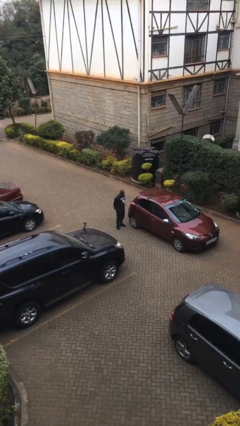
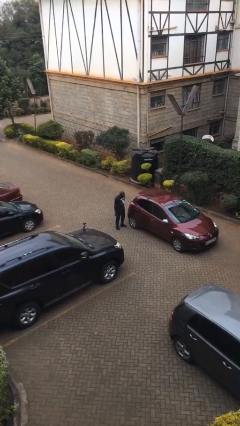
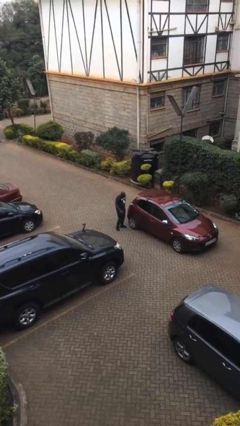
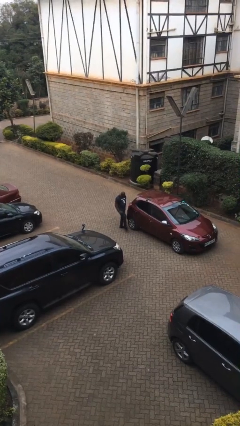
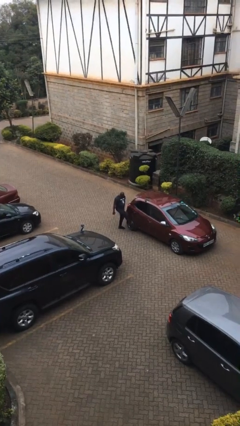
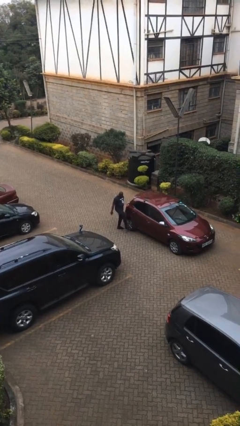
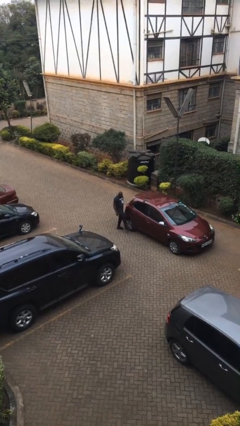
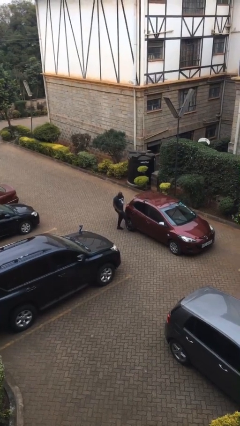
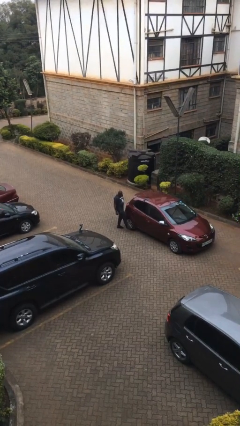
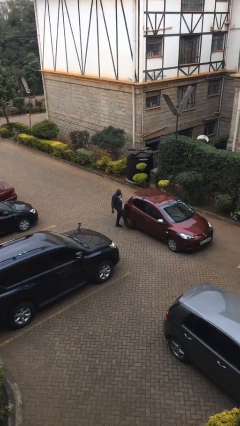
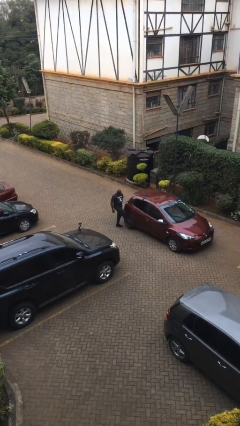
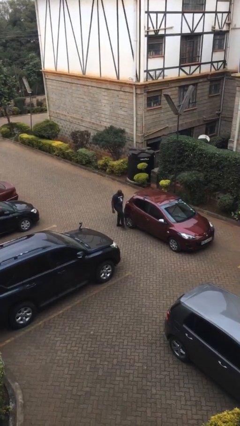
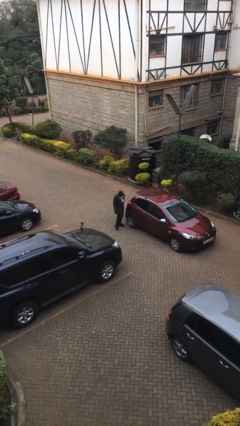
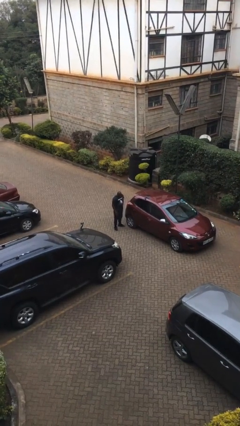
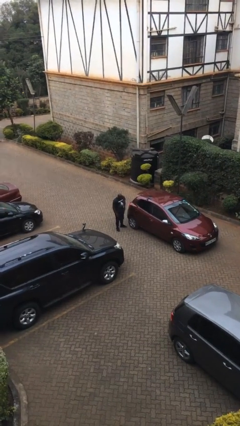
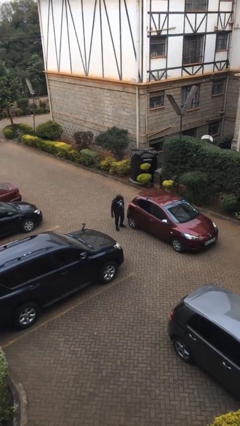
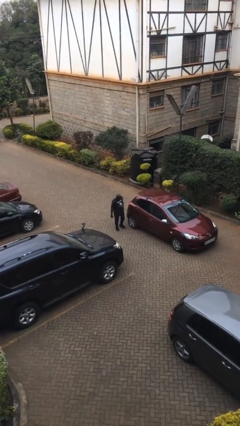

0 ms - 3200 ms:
person kicks car tires

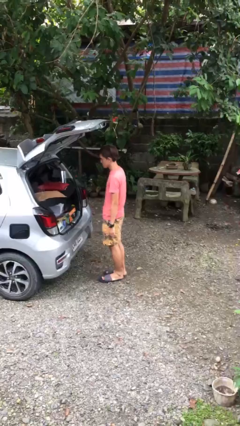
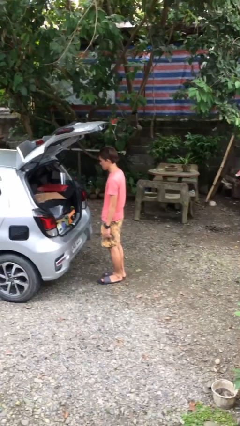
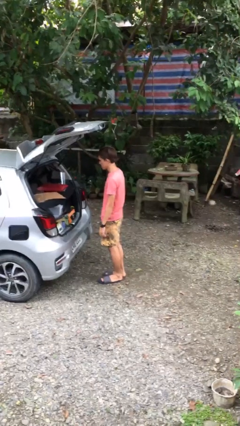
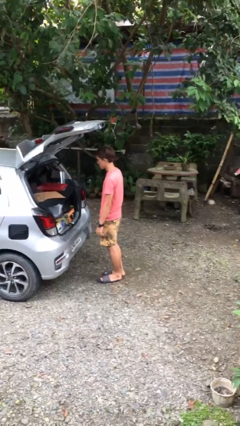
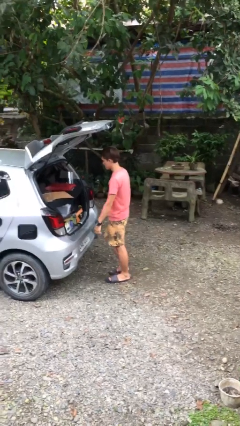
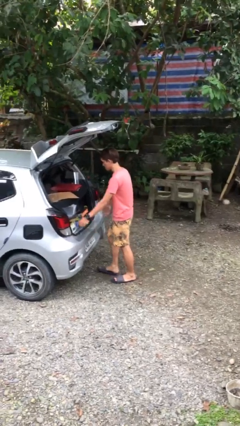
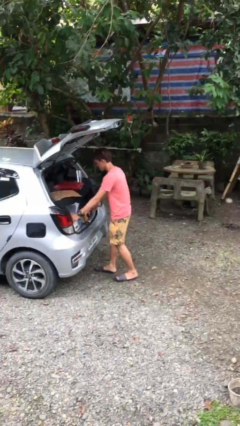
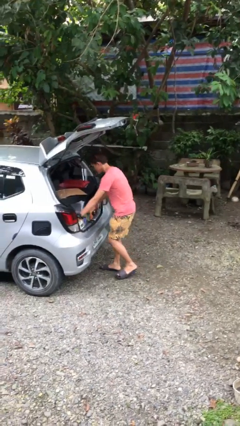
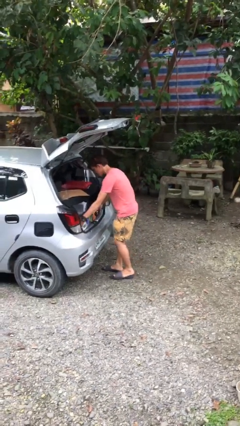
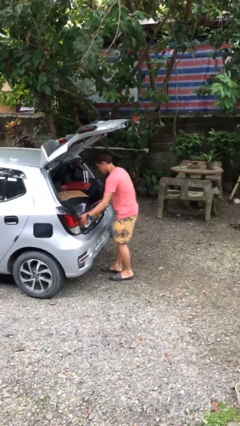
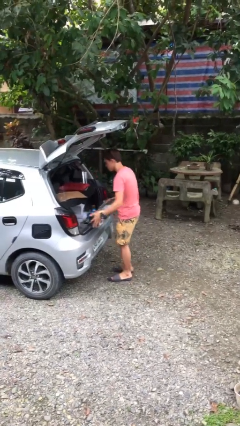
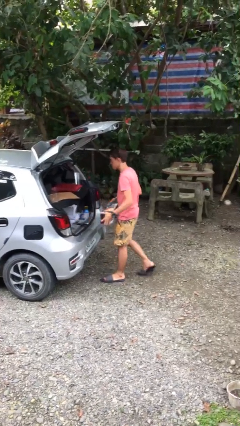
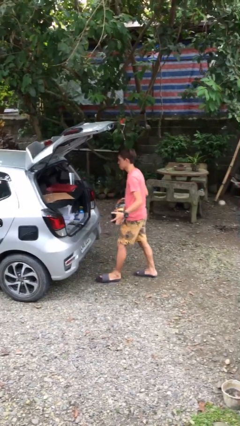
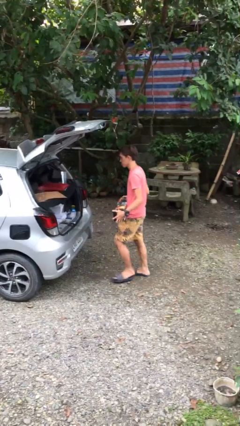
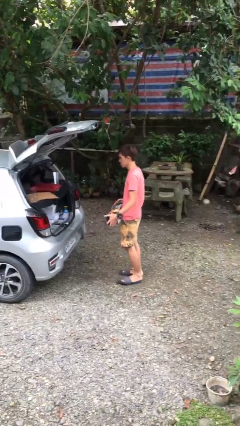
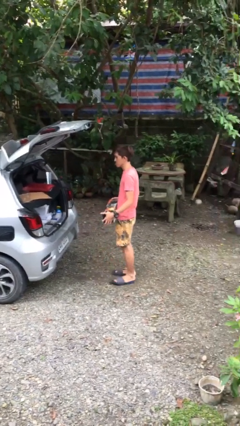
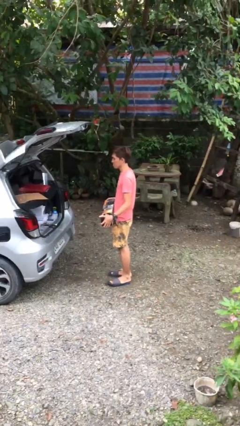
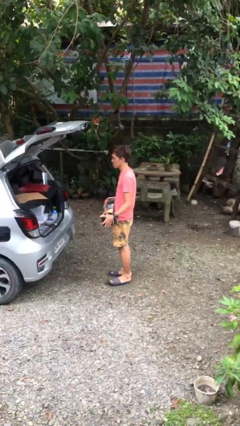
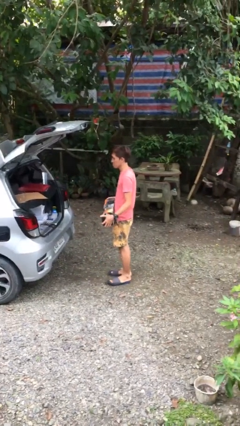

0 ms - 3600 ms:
person unloads car

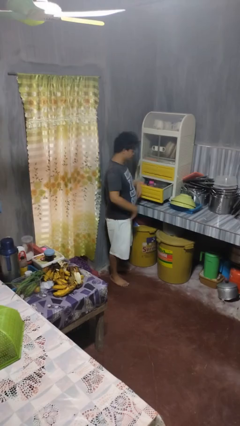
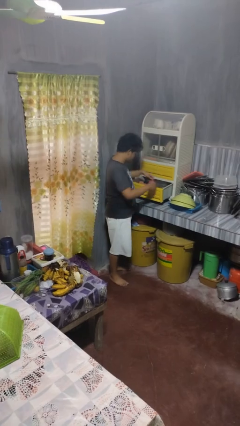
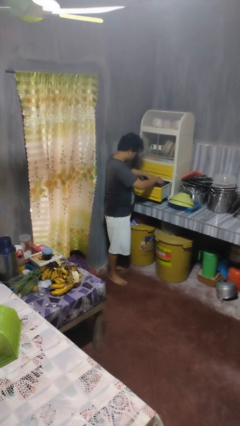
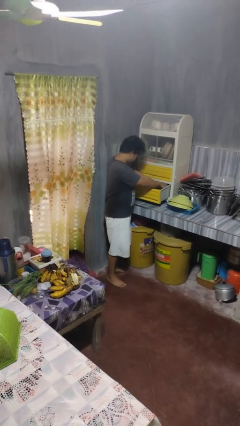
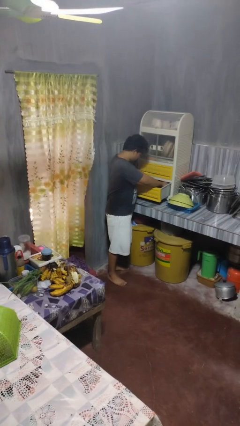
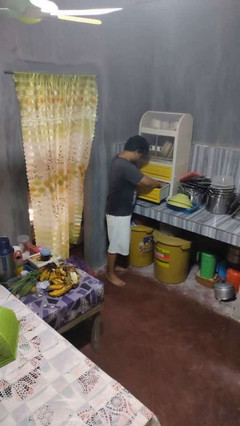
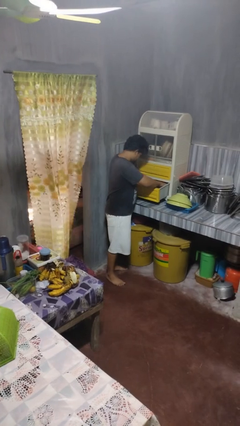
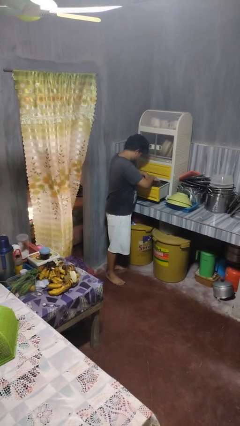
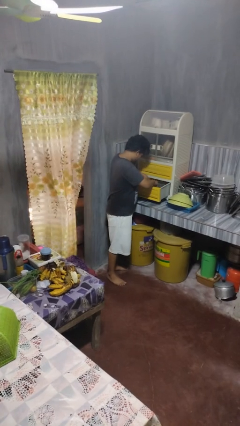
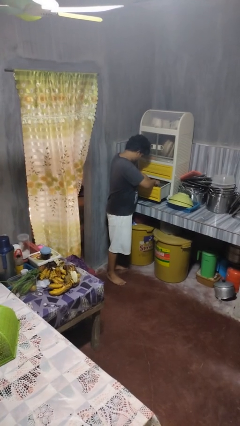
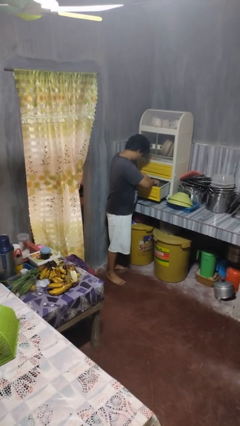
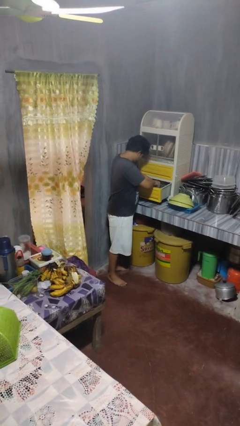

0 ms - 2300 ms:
person searches in kitchen drawer

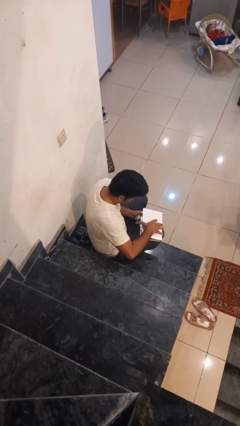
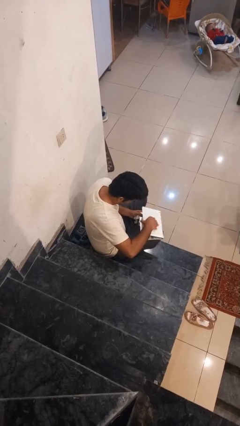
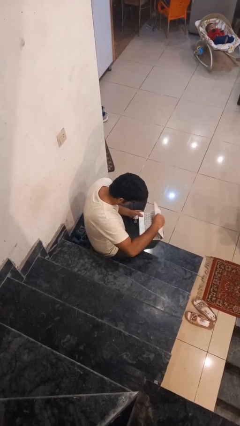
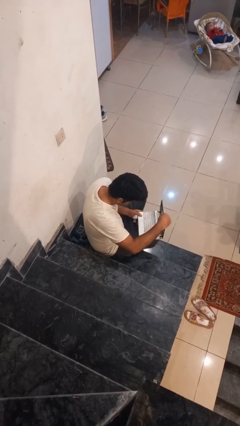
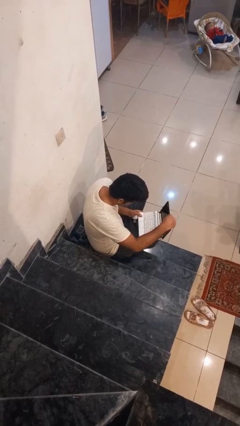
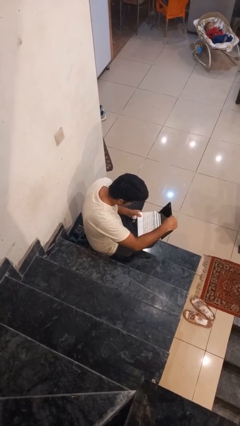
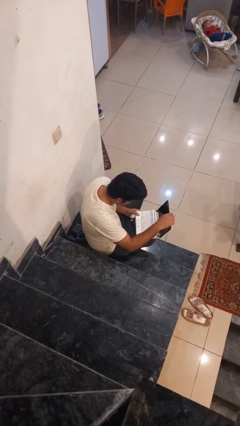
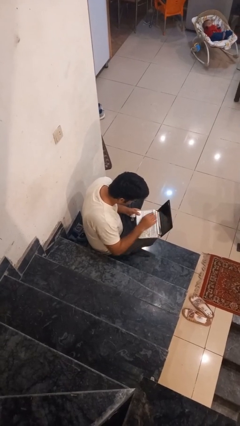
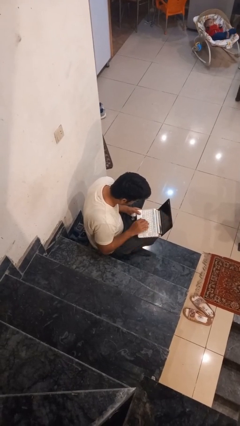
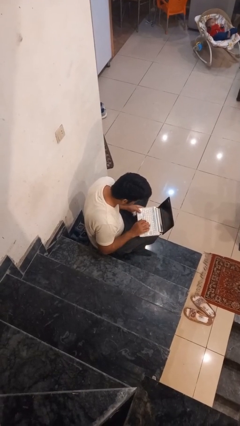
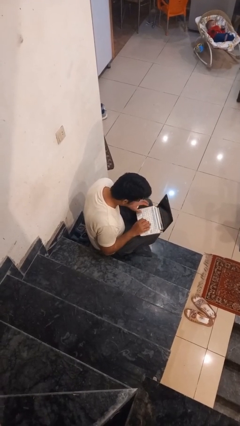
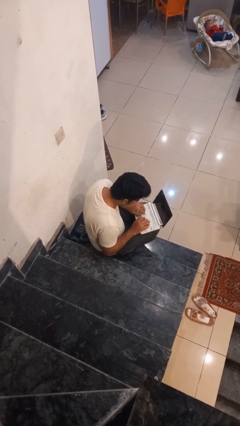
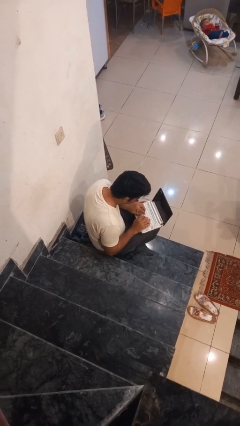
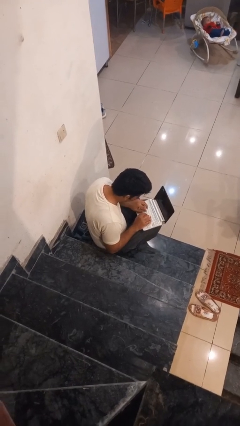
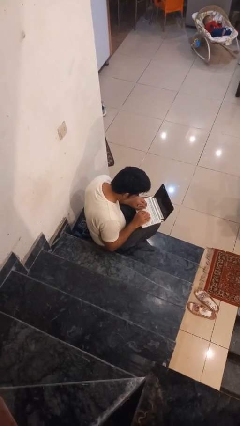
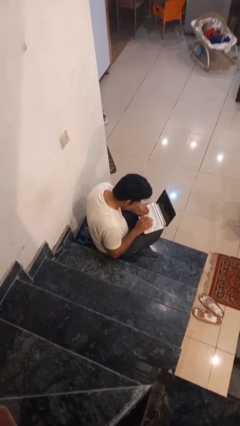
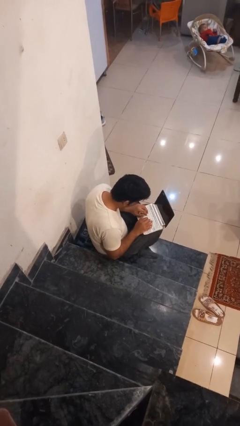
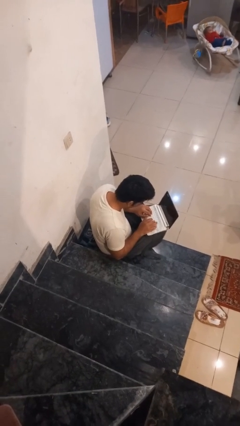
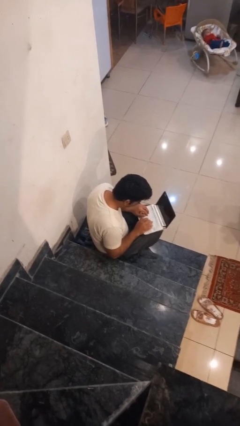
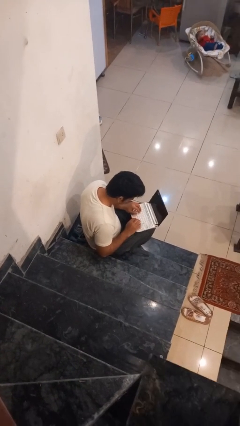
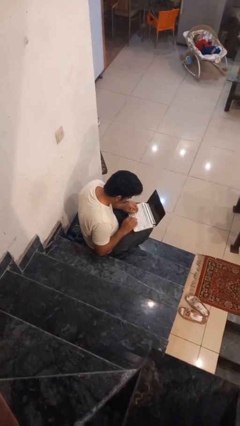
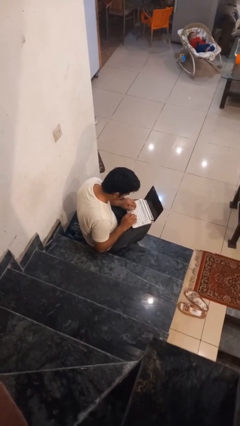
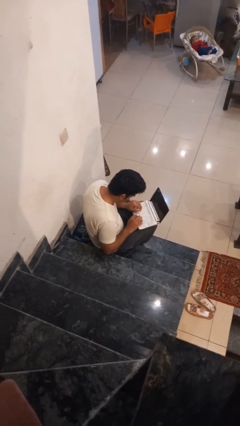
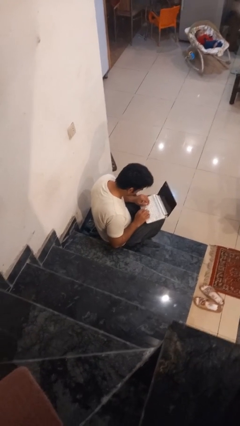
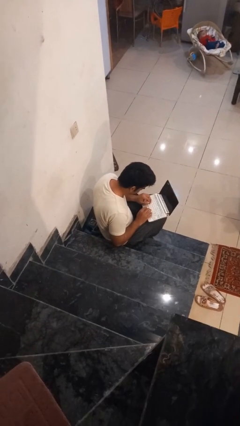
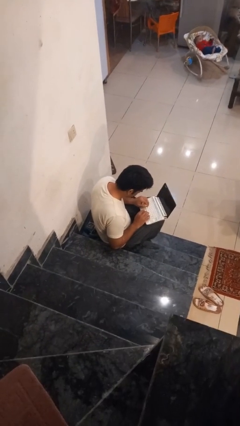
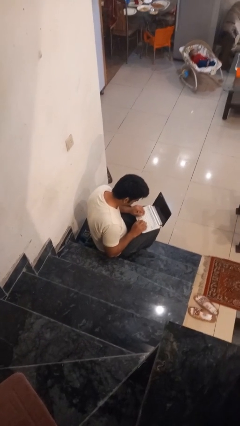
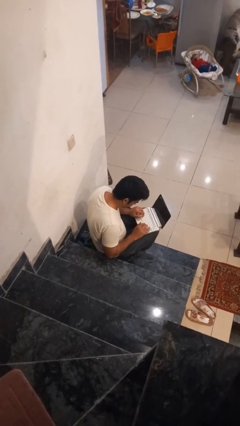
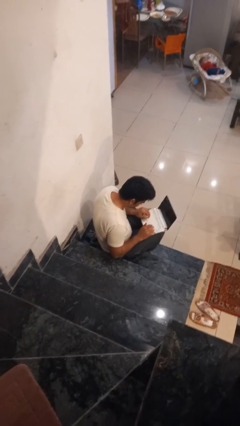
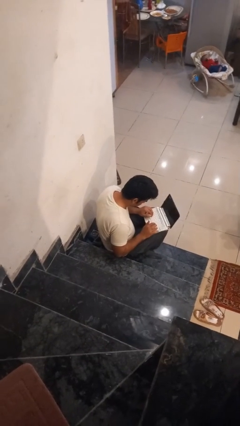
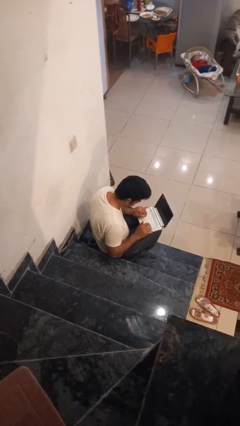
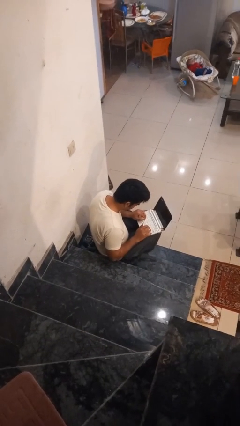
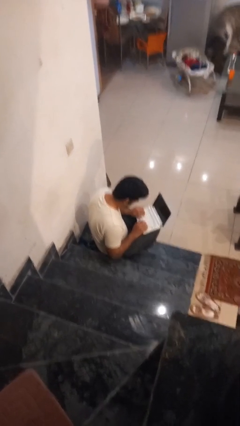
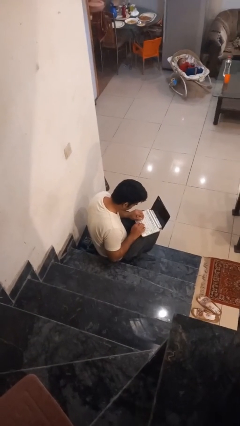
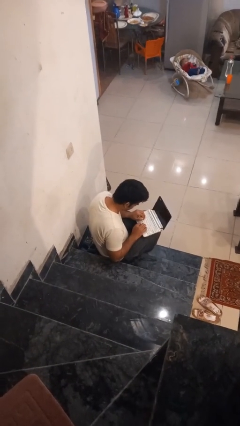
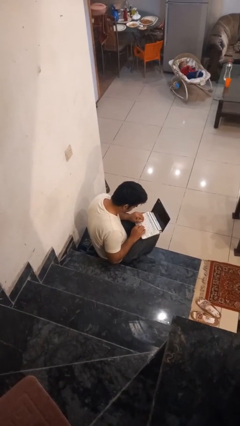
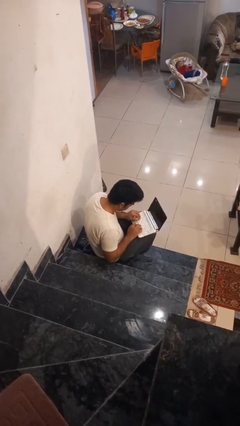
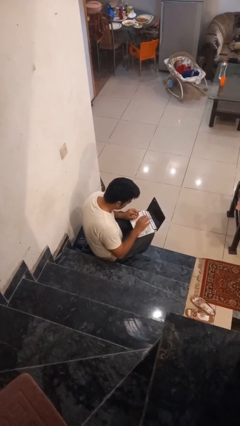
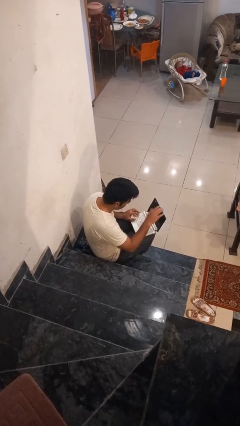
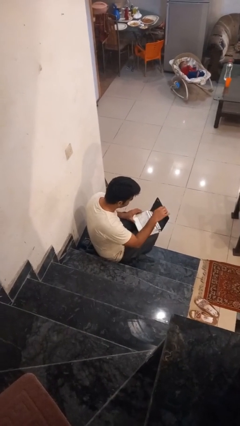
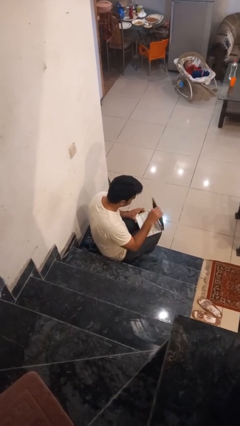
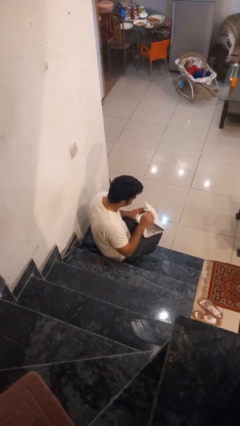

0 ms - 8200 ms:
person interacts with laptop

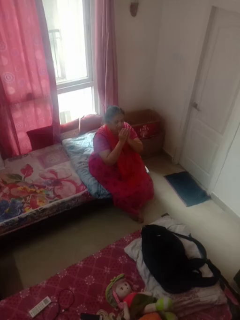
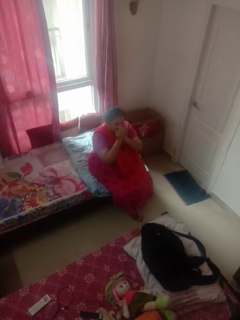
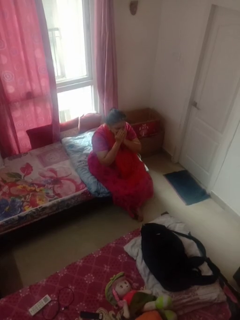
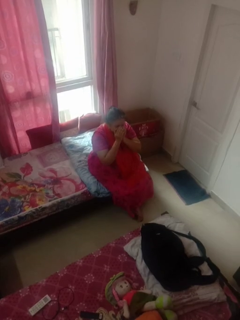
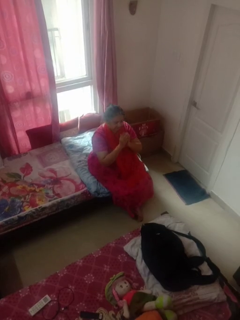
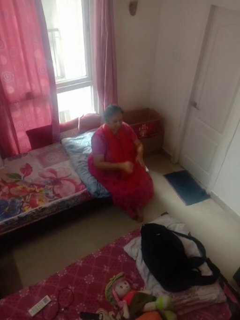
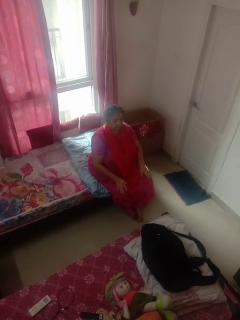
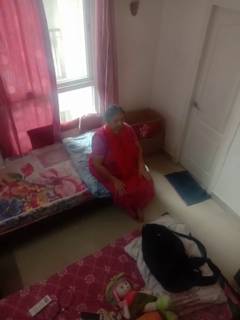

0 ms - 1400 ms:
person sneezes into hand
